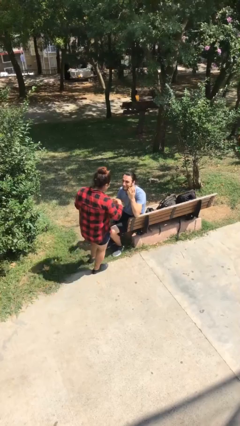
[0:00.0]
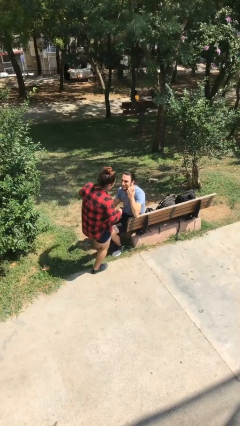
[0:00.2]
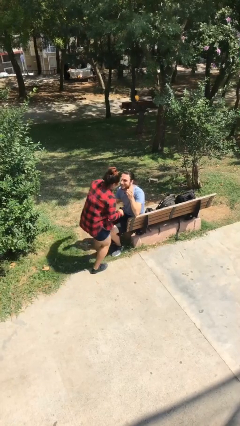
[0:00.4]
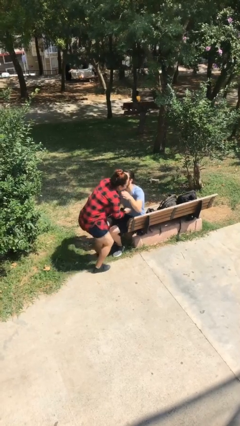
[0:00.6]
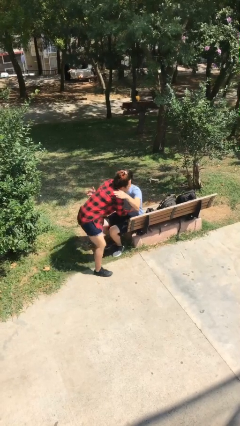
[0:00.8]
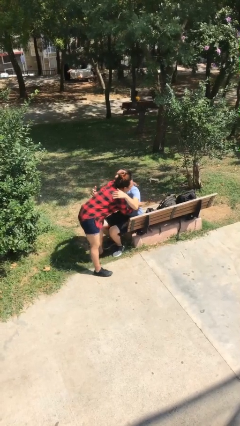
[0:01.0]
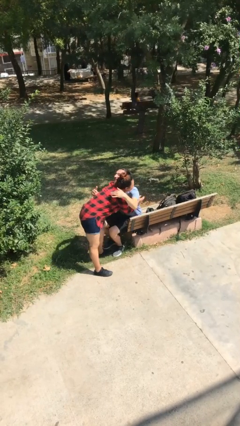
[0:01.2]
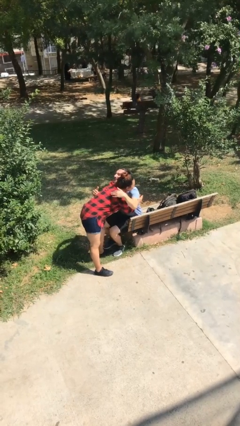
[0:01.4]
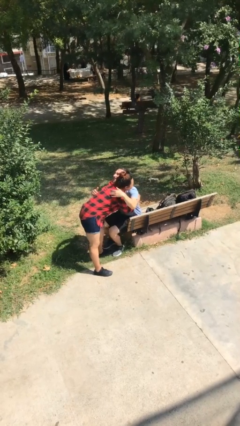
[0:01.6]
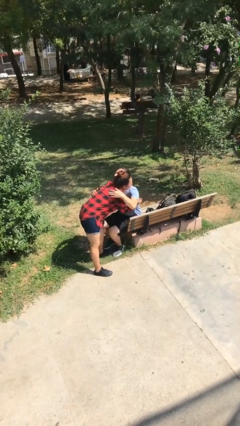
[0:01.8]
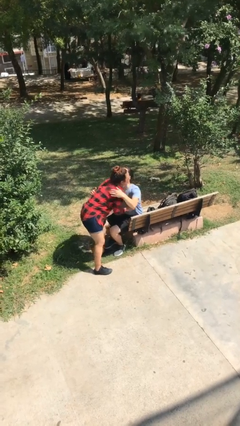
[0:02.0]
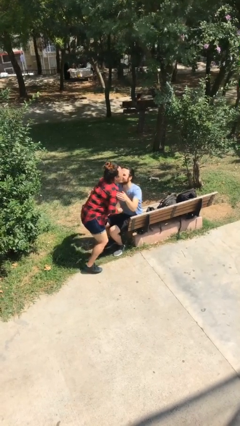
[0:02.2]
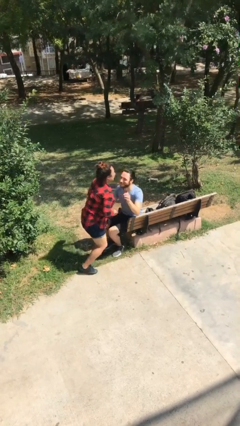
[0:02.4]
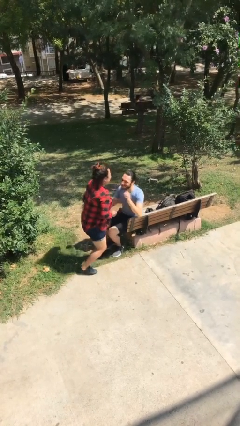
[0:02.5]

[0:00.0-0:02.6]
person embraces person

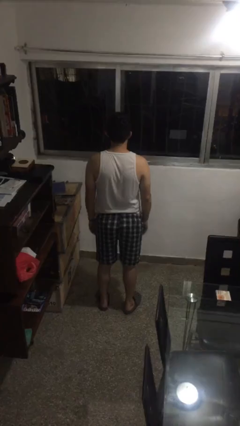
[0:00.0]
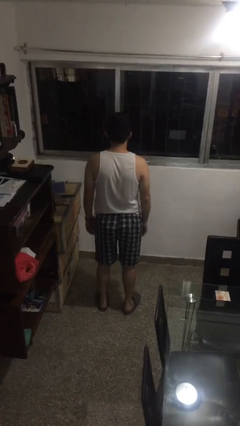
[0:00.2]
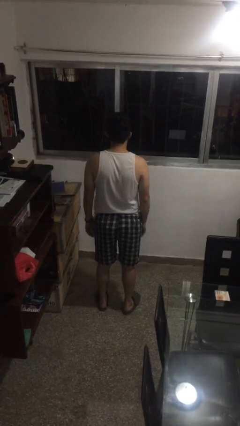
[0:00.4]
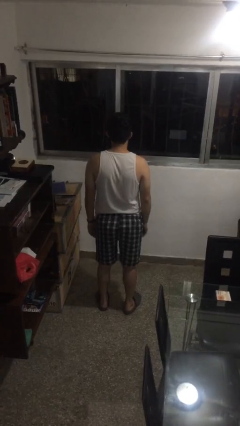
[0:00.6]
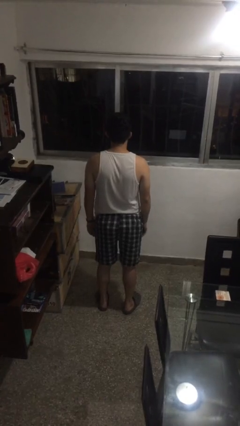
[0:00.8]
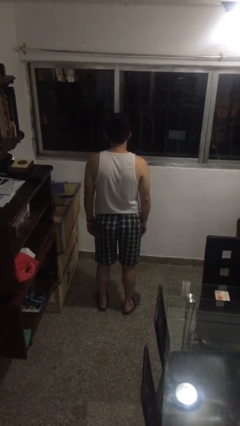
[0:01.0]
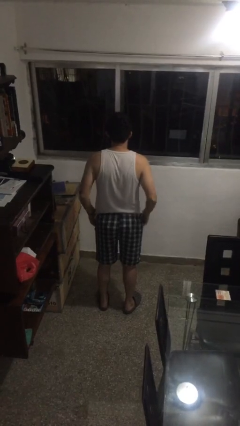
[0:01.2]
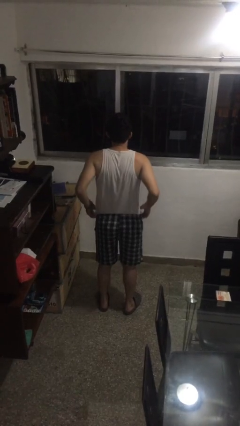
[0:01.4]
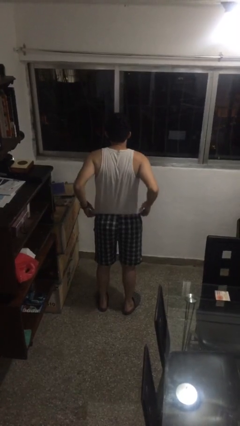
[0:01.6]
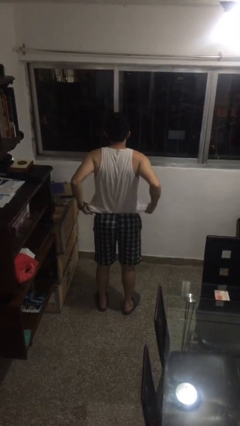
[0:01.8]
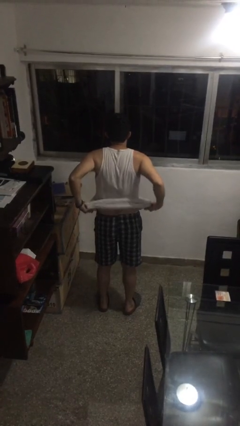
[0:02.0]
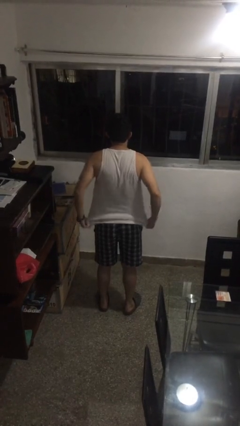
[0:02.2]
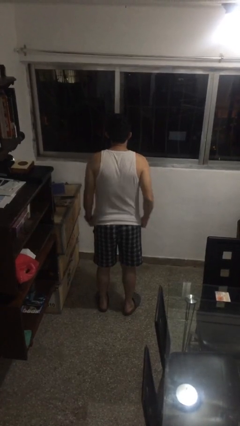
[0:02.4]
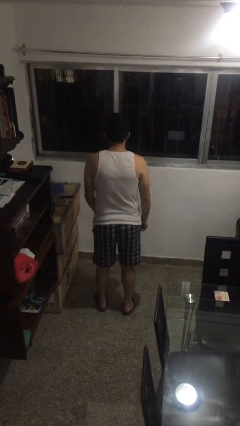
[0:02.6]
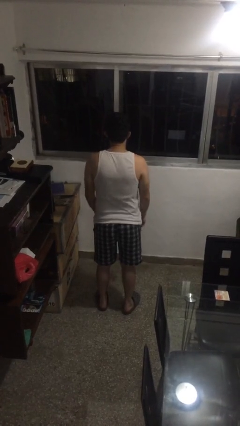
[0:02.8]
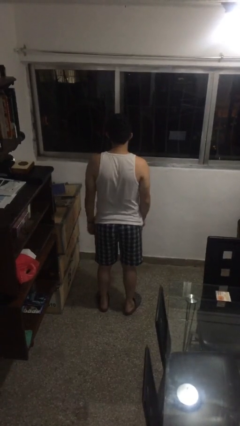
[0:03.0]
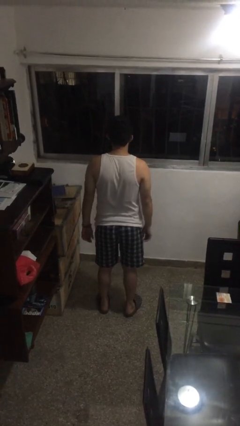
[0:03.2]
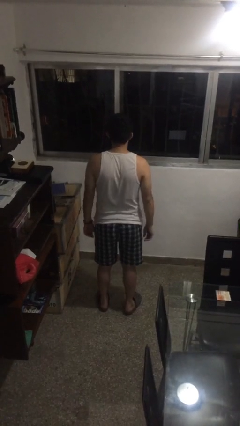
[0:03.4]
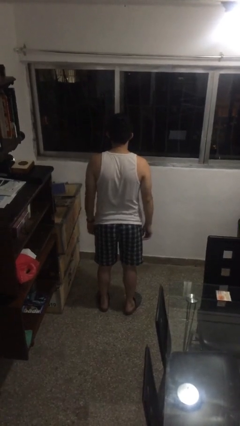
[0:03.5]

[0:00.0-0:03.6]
person untucks shirt

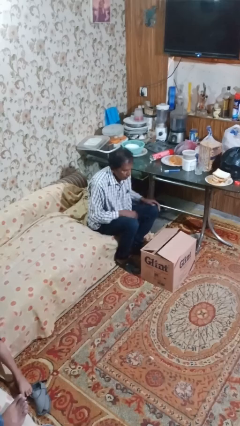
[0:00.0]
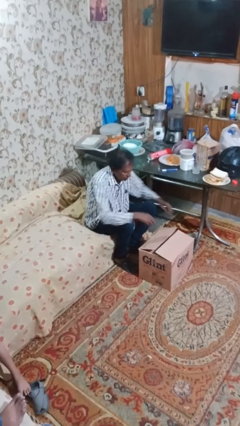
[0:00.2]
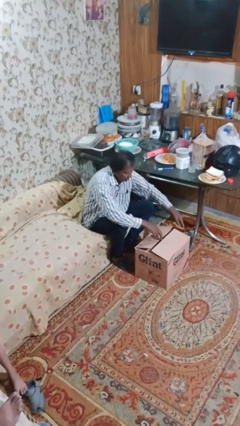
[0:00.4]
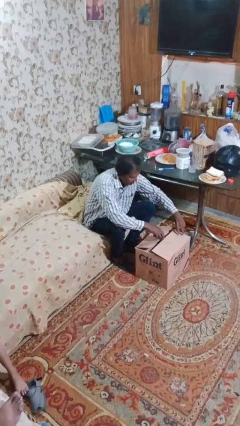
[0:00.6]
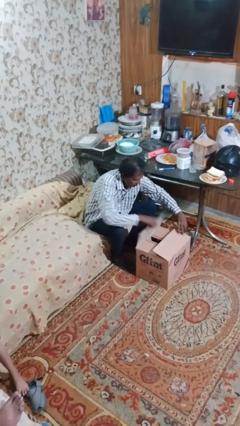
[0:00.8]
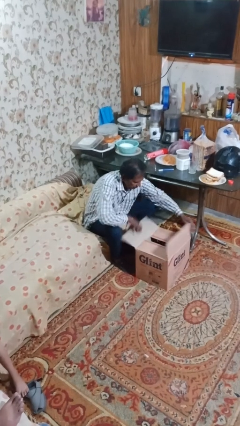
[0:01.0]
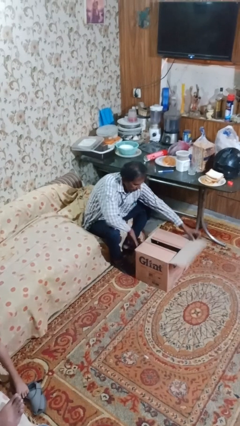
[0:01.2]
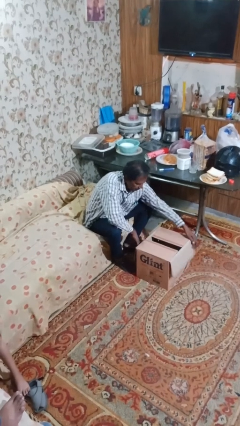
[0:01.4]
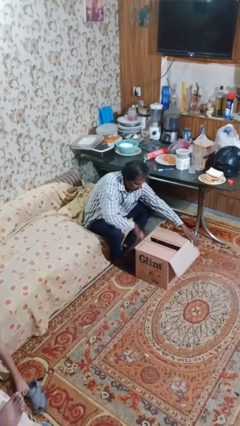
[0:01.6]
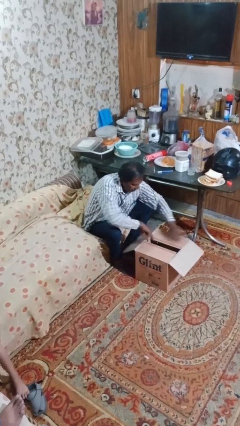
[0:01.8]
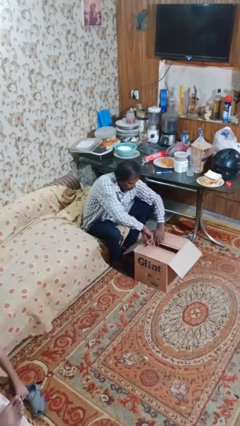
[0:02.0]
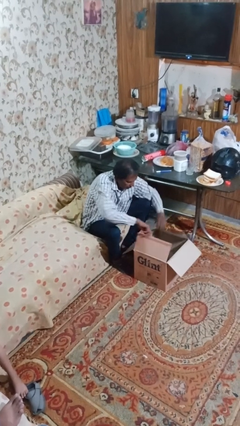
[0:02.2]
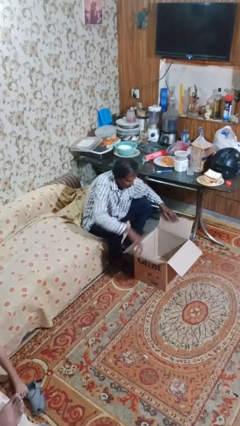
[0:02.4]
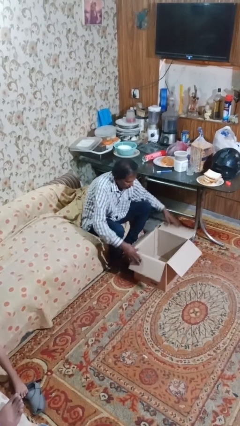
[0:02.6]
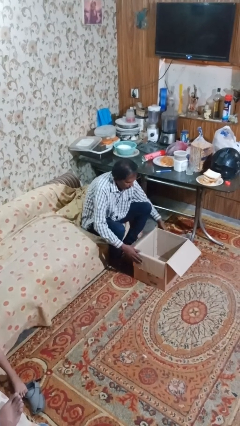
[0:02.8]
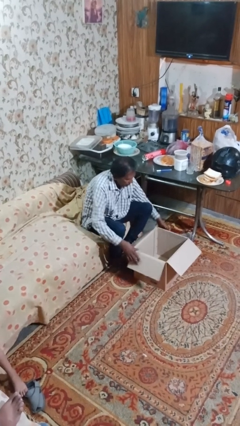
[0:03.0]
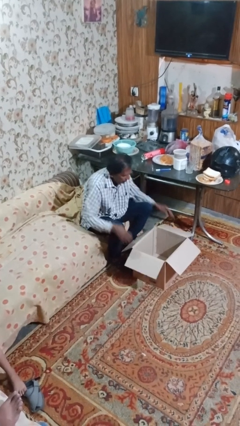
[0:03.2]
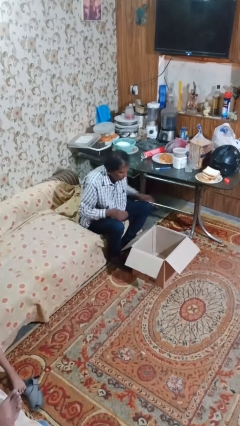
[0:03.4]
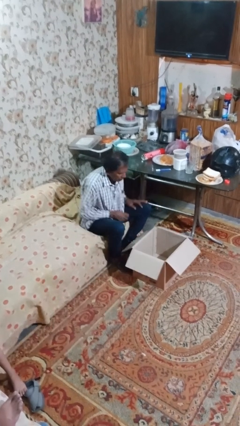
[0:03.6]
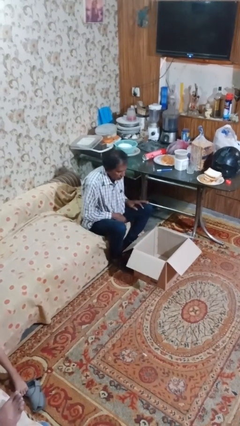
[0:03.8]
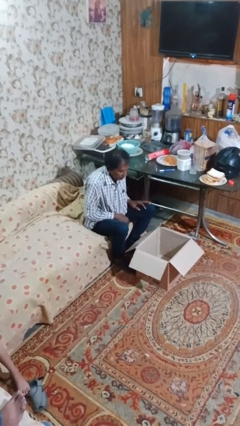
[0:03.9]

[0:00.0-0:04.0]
person opens box

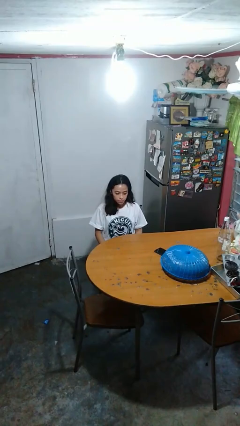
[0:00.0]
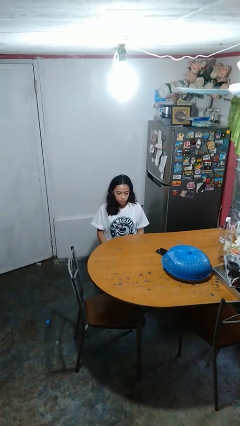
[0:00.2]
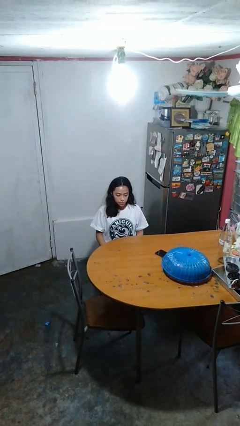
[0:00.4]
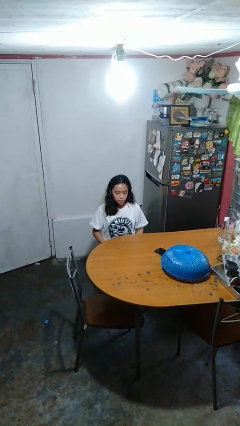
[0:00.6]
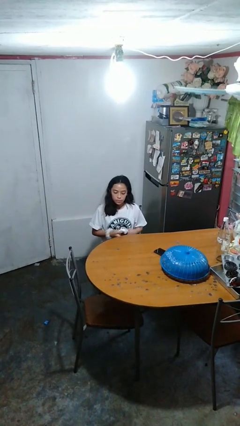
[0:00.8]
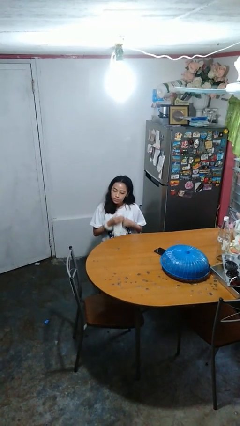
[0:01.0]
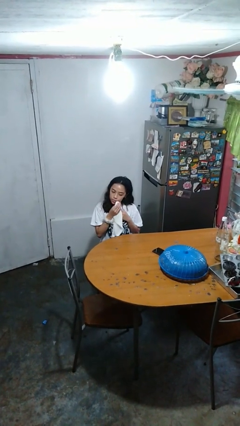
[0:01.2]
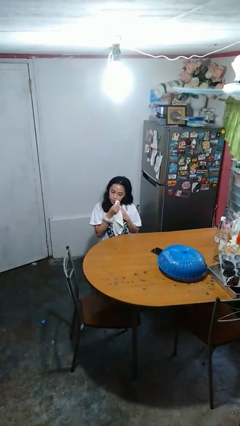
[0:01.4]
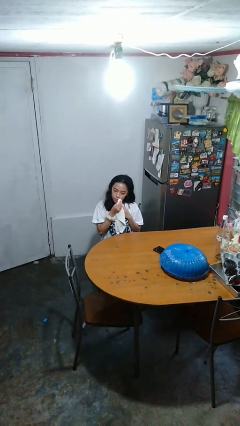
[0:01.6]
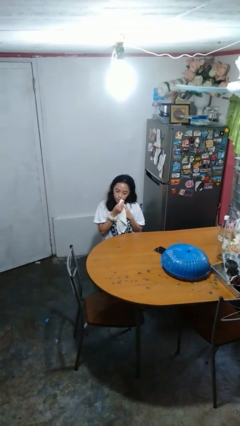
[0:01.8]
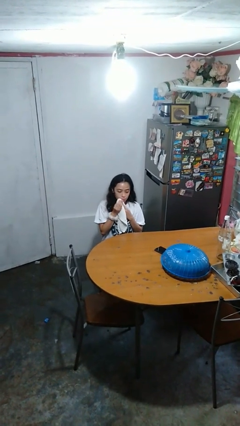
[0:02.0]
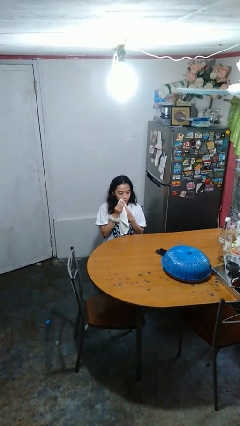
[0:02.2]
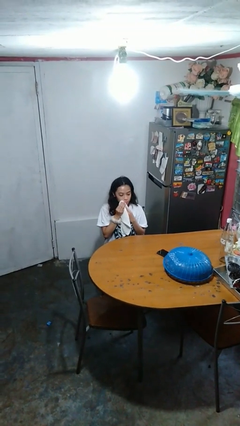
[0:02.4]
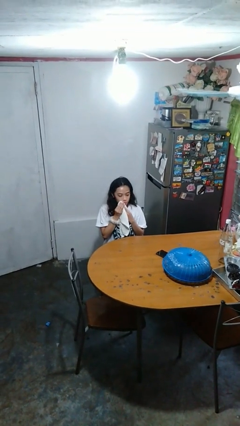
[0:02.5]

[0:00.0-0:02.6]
person wipes mouth with napkin

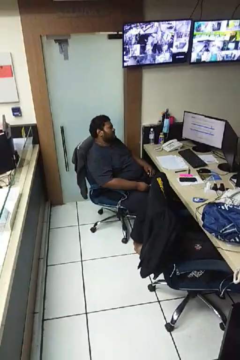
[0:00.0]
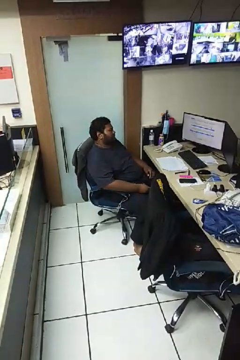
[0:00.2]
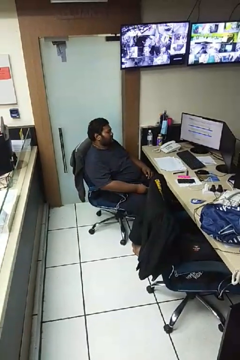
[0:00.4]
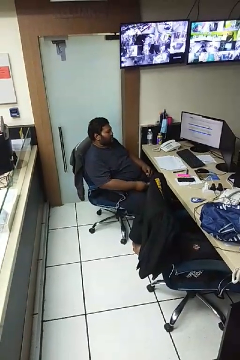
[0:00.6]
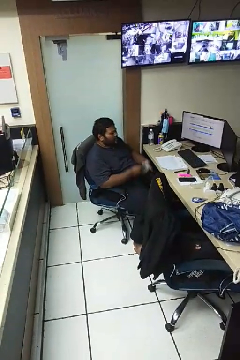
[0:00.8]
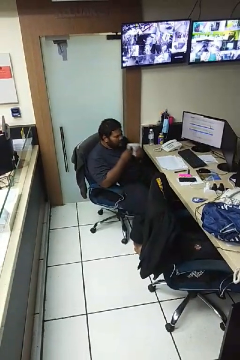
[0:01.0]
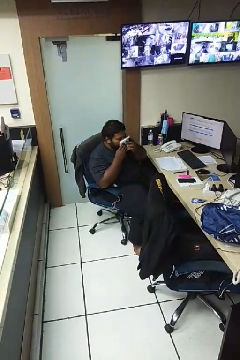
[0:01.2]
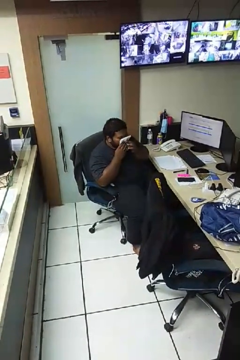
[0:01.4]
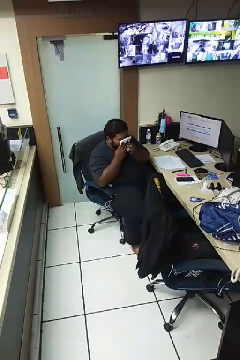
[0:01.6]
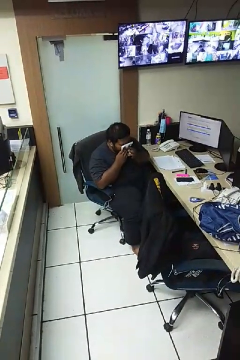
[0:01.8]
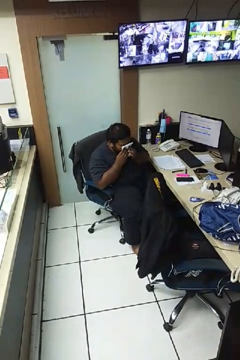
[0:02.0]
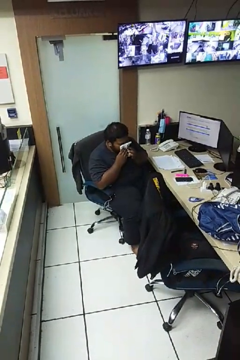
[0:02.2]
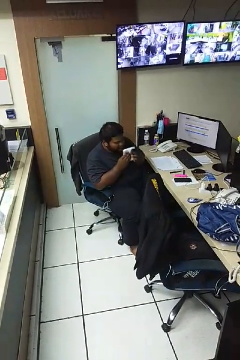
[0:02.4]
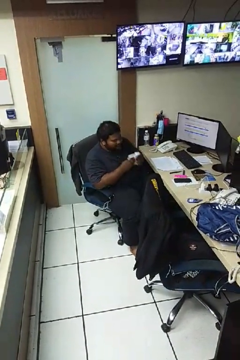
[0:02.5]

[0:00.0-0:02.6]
person blows nose

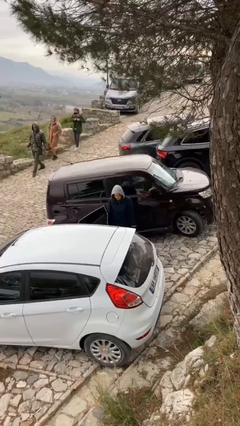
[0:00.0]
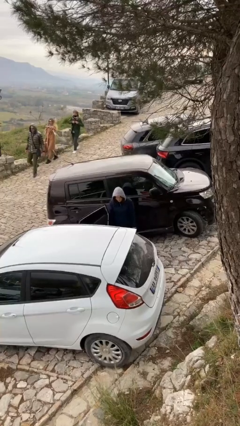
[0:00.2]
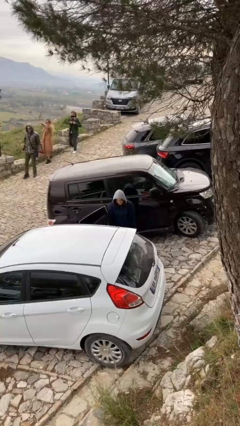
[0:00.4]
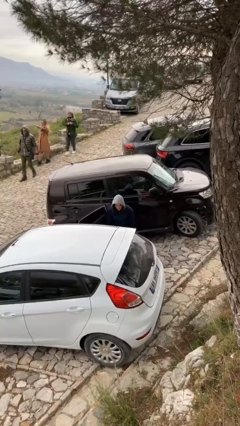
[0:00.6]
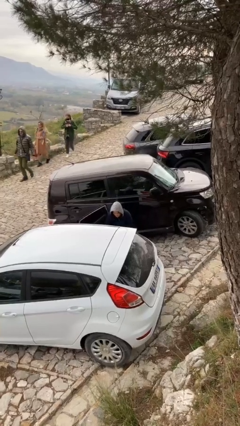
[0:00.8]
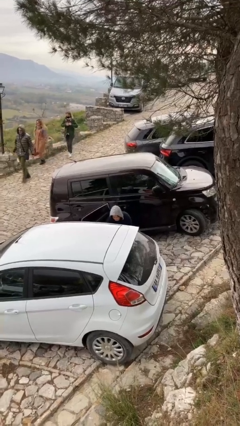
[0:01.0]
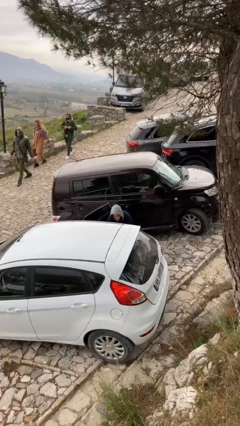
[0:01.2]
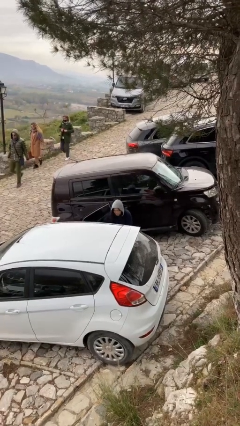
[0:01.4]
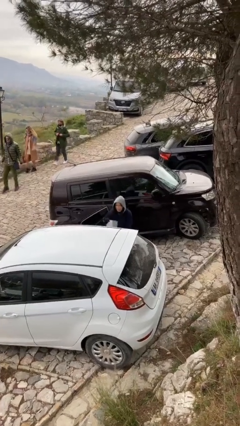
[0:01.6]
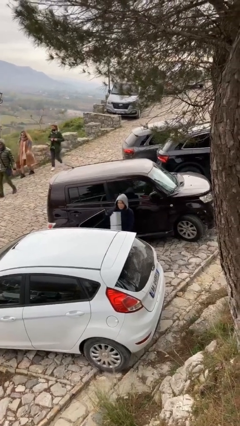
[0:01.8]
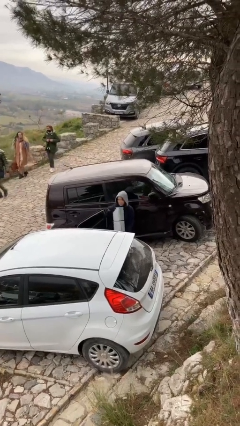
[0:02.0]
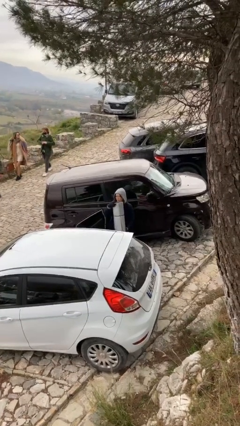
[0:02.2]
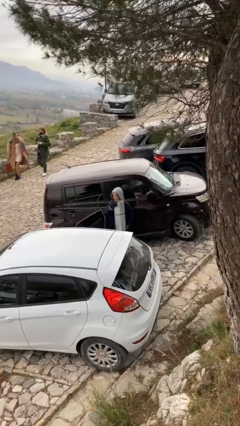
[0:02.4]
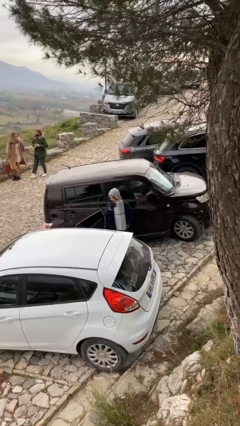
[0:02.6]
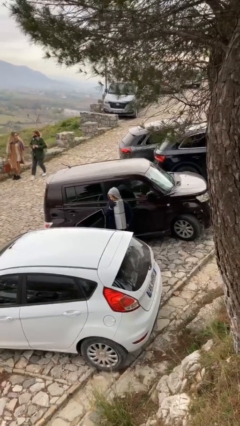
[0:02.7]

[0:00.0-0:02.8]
person unloads car
